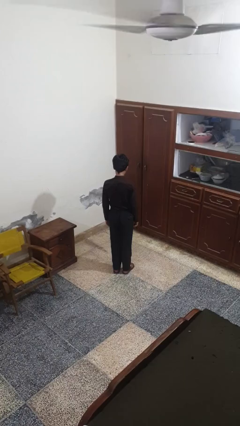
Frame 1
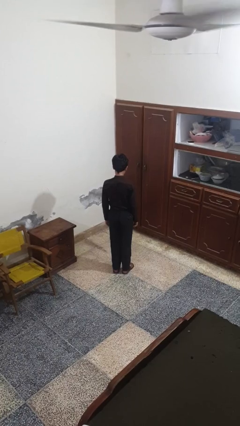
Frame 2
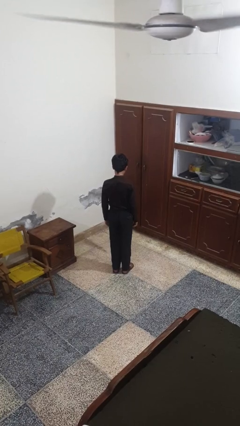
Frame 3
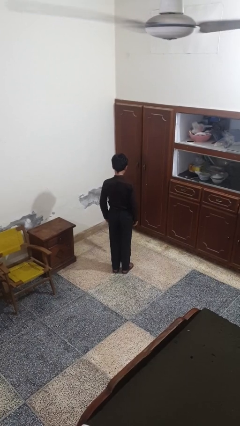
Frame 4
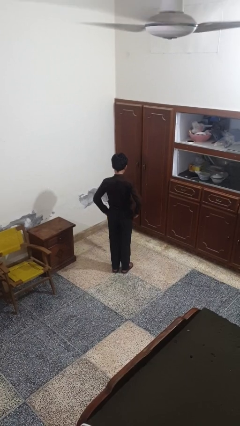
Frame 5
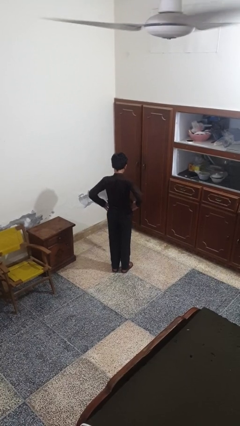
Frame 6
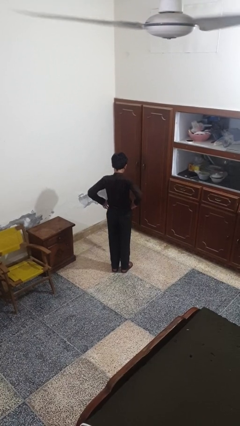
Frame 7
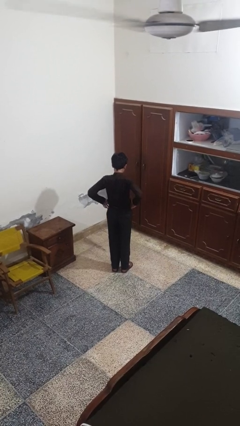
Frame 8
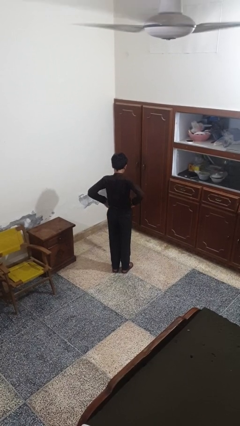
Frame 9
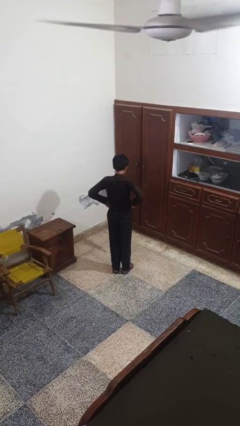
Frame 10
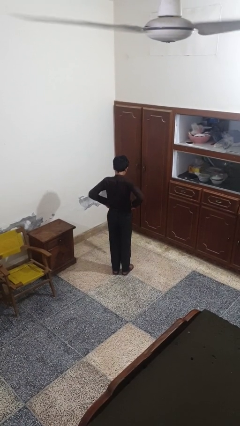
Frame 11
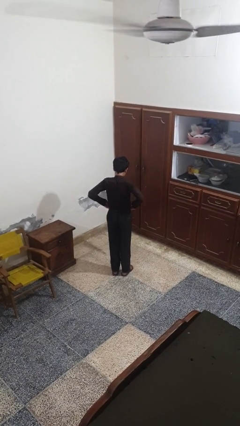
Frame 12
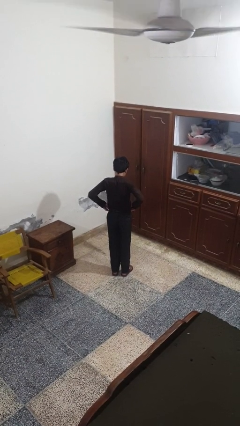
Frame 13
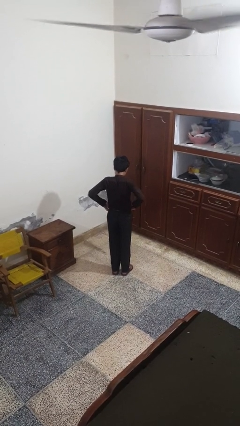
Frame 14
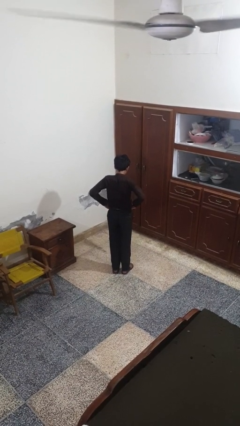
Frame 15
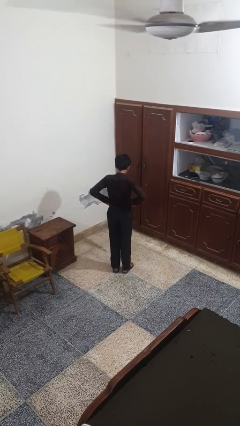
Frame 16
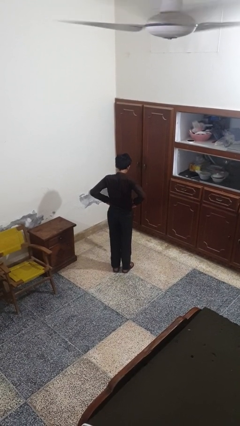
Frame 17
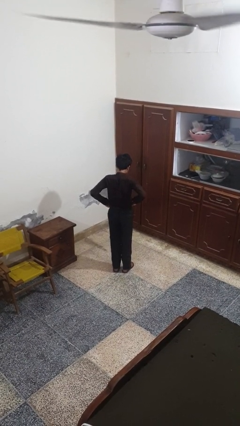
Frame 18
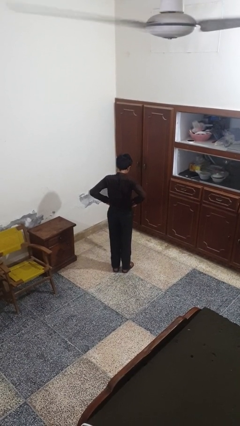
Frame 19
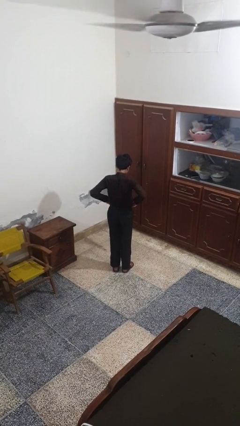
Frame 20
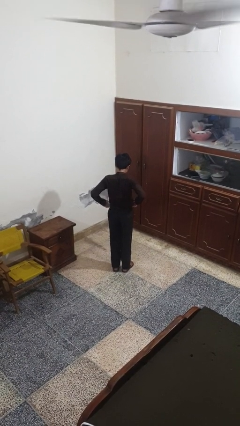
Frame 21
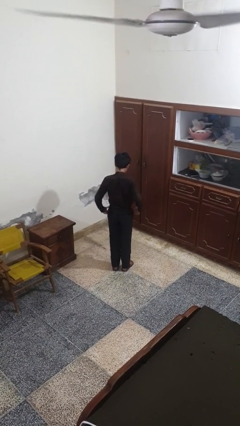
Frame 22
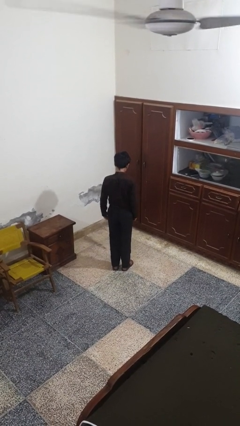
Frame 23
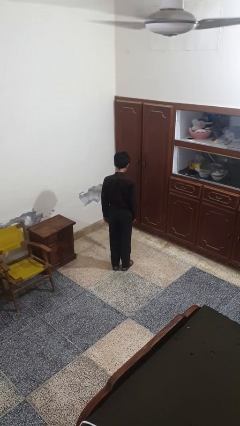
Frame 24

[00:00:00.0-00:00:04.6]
person hikes up pants

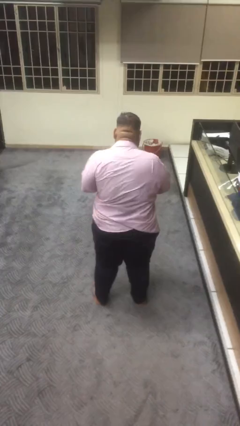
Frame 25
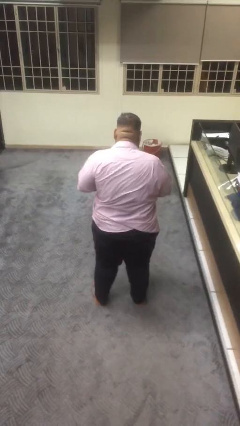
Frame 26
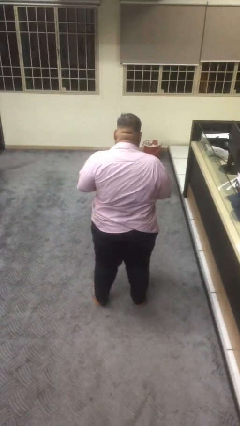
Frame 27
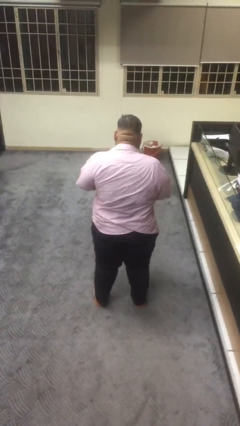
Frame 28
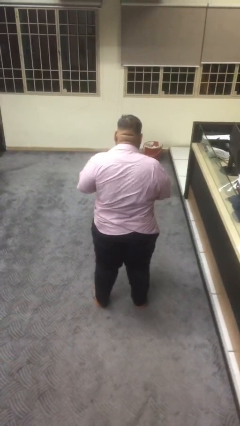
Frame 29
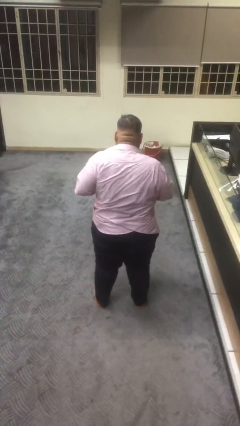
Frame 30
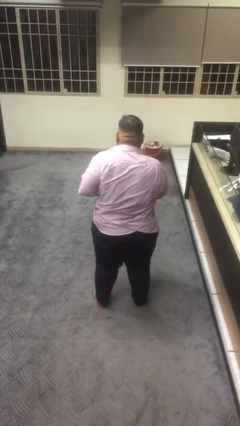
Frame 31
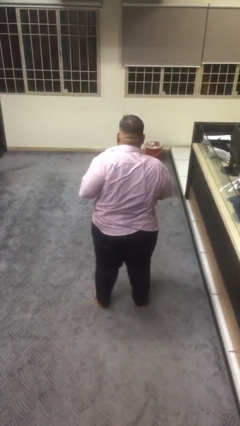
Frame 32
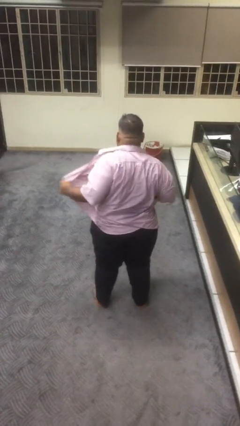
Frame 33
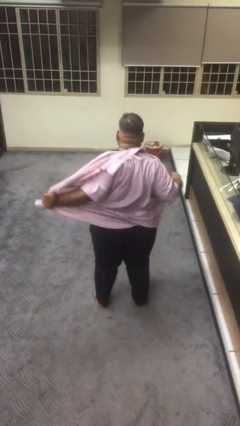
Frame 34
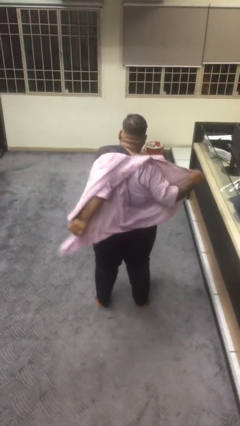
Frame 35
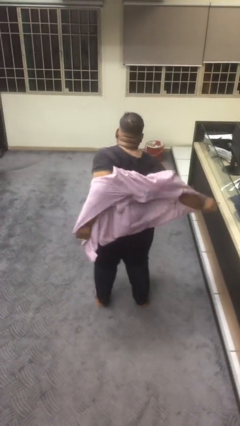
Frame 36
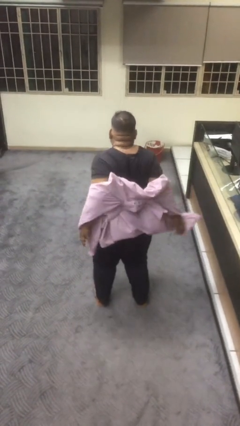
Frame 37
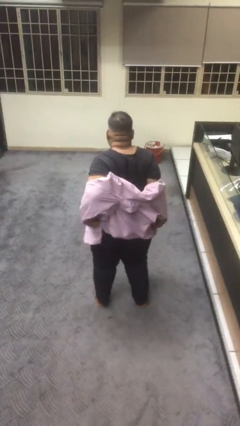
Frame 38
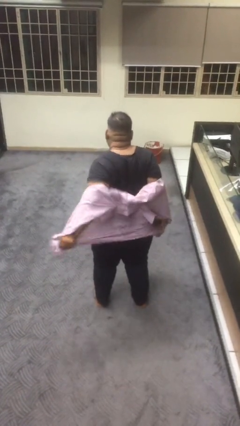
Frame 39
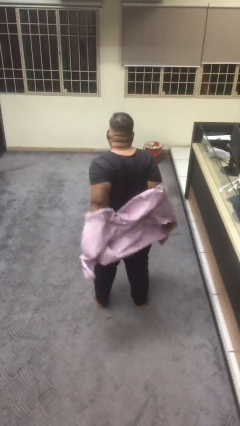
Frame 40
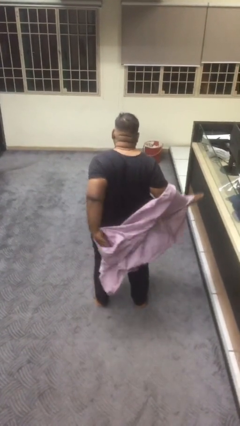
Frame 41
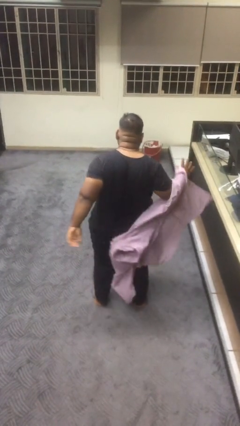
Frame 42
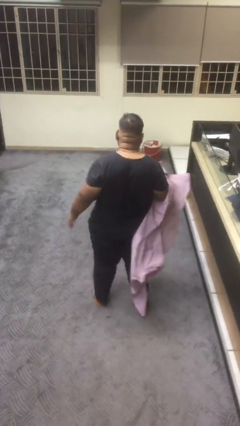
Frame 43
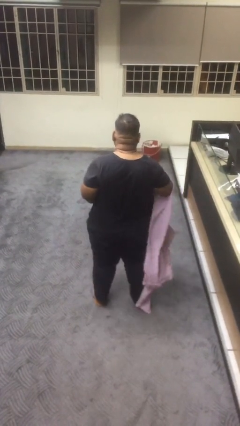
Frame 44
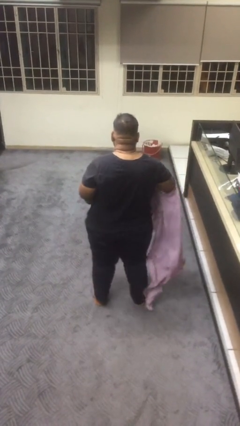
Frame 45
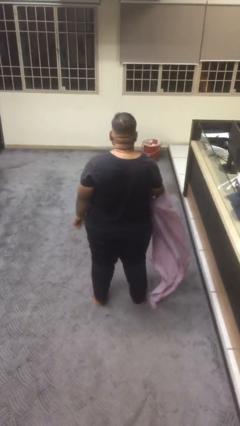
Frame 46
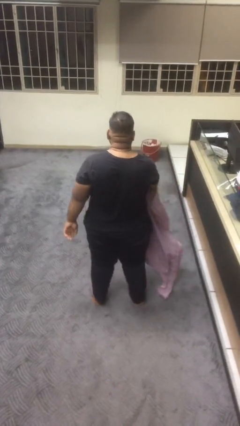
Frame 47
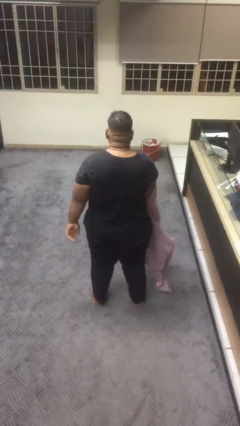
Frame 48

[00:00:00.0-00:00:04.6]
person takes off shirt

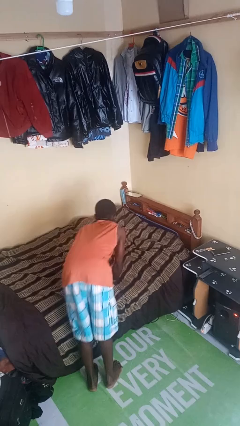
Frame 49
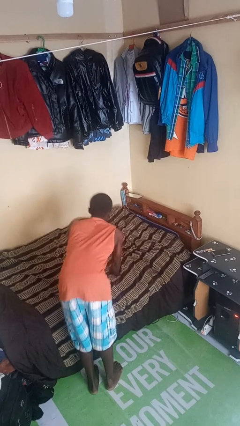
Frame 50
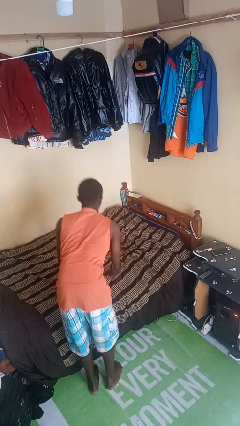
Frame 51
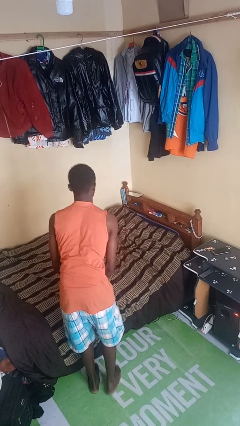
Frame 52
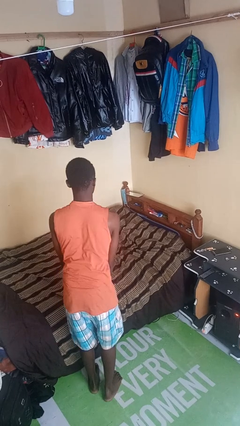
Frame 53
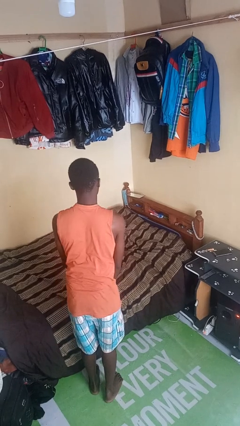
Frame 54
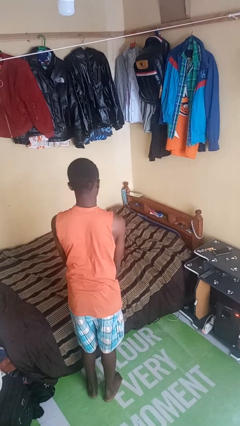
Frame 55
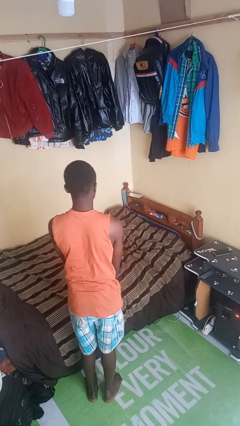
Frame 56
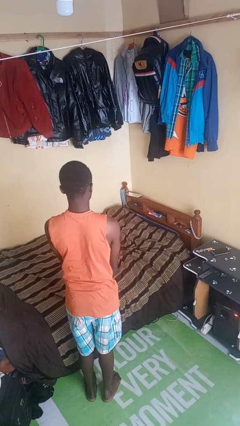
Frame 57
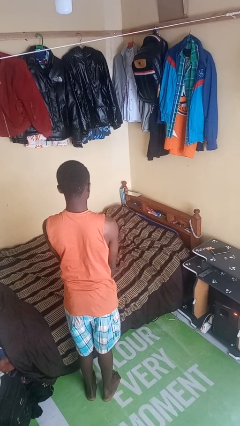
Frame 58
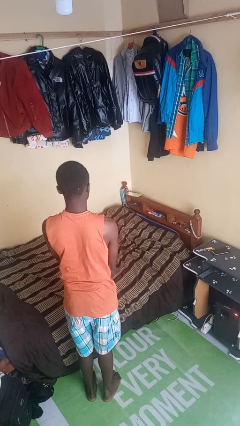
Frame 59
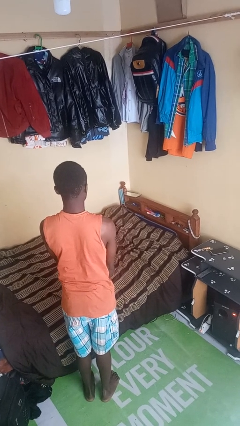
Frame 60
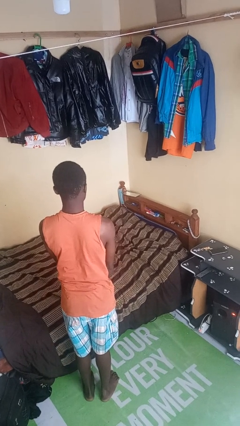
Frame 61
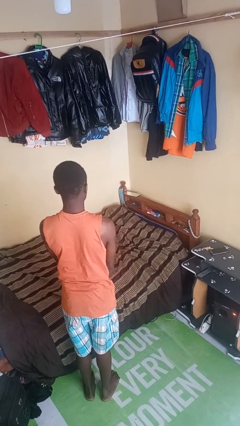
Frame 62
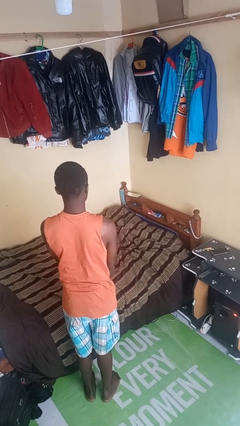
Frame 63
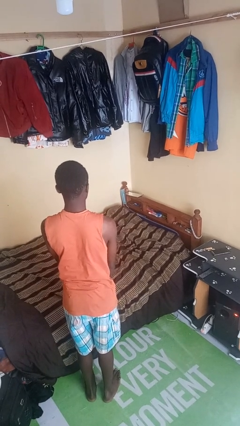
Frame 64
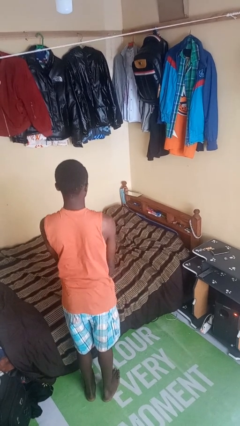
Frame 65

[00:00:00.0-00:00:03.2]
person stands up

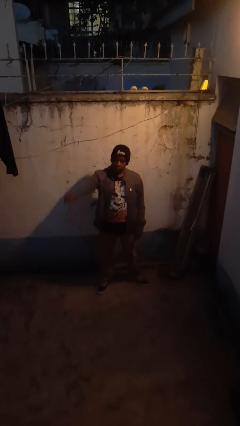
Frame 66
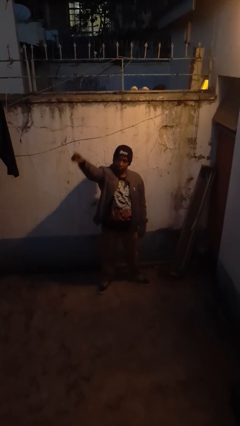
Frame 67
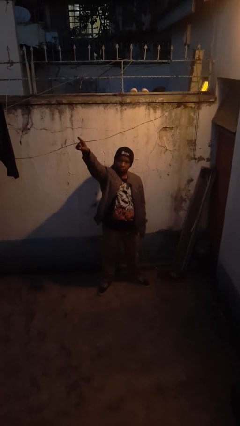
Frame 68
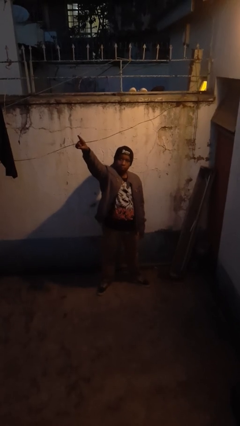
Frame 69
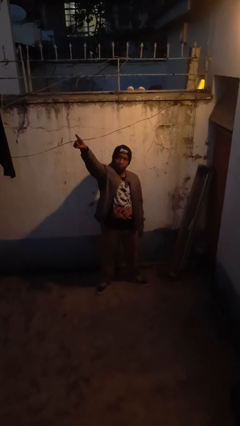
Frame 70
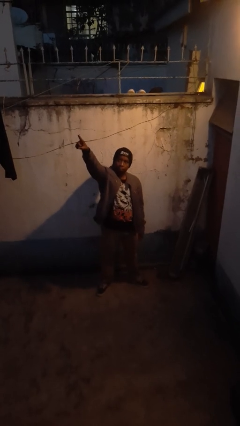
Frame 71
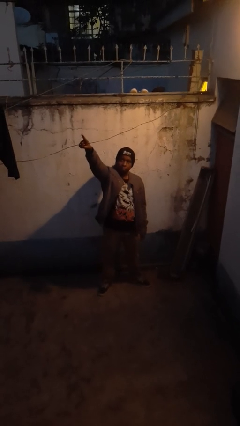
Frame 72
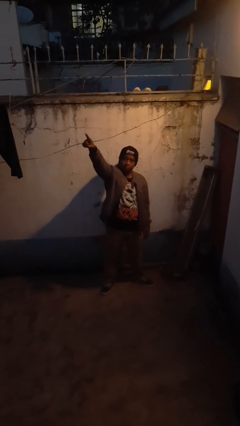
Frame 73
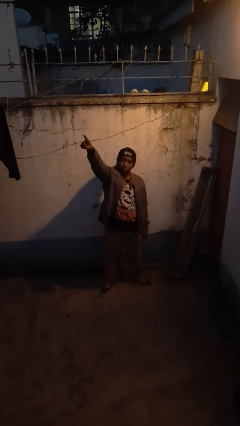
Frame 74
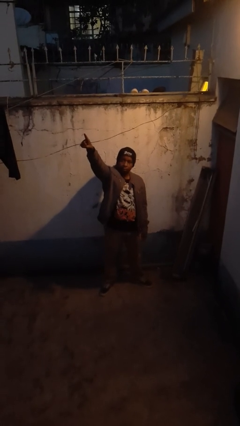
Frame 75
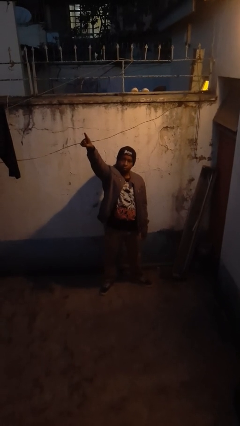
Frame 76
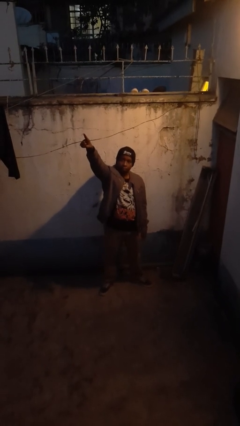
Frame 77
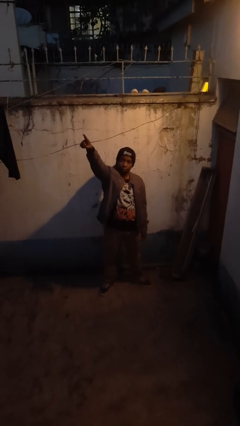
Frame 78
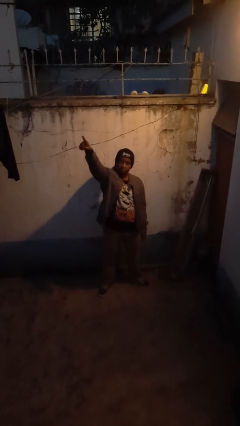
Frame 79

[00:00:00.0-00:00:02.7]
person points at person

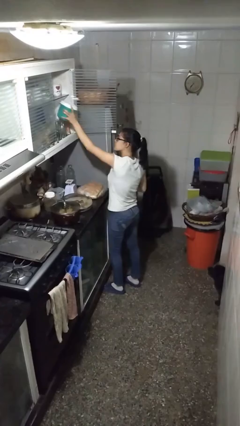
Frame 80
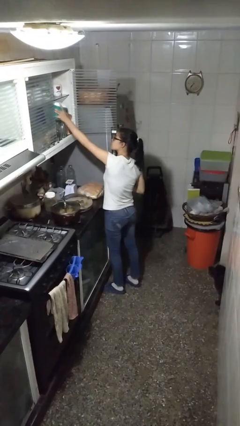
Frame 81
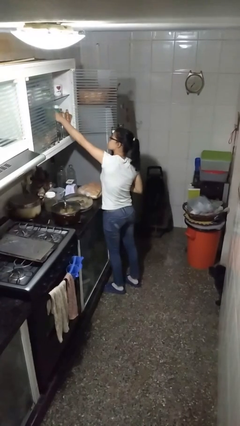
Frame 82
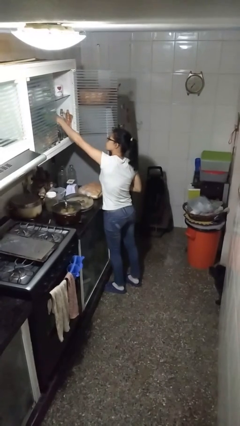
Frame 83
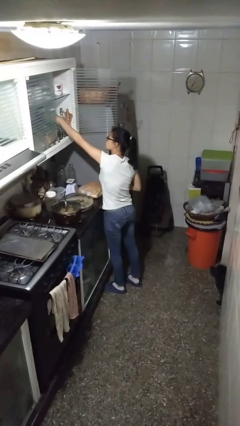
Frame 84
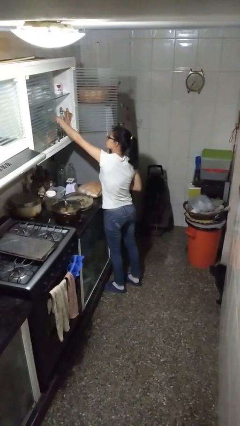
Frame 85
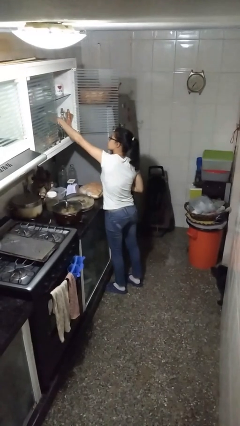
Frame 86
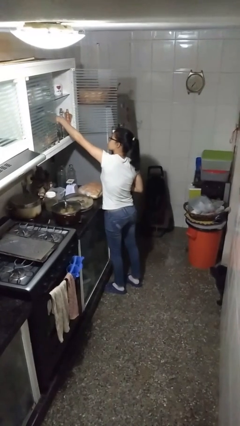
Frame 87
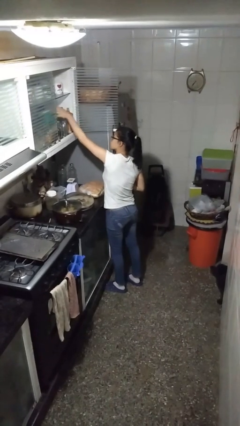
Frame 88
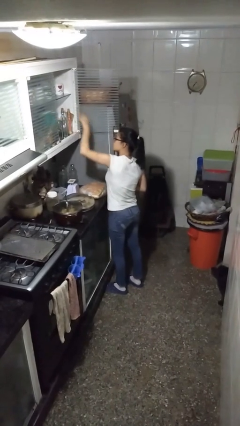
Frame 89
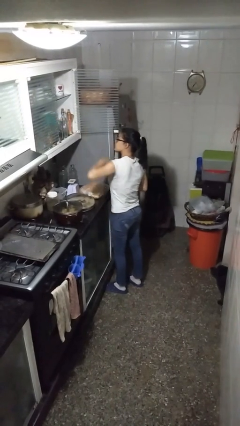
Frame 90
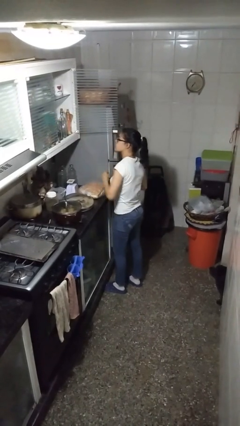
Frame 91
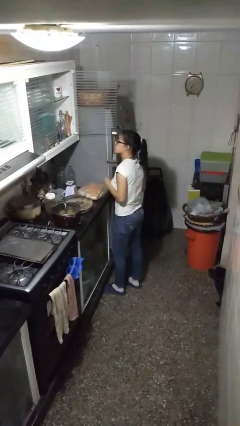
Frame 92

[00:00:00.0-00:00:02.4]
person puts down object into cabinet
